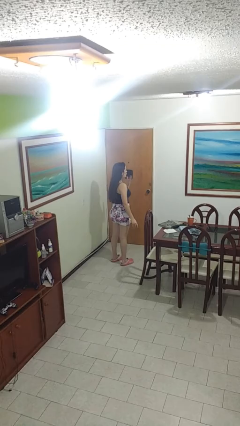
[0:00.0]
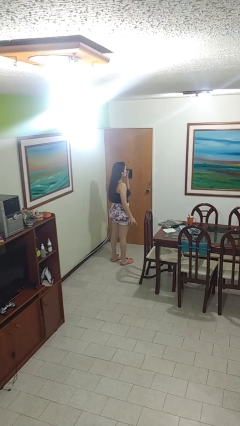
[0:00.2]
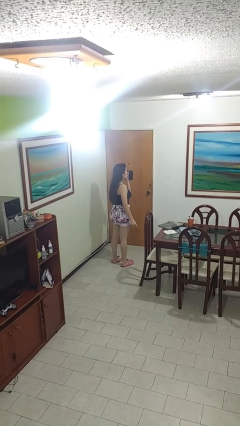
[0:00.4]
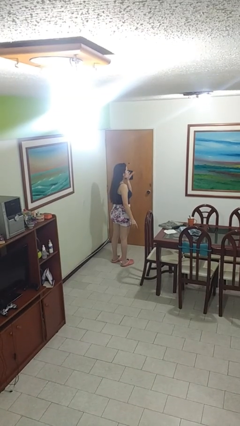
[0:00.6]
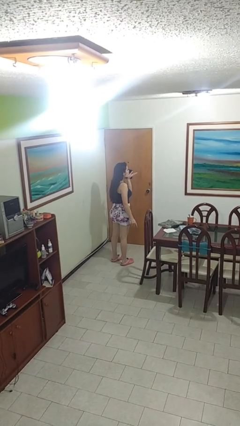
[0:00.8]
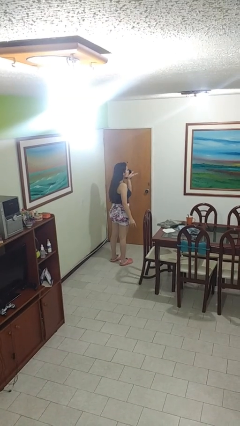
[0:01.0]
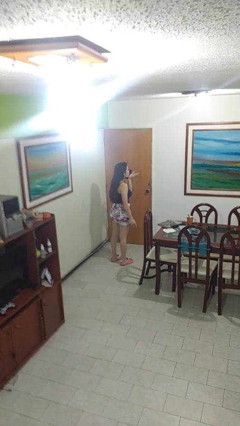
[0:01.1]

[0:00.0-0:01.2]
person gestures blow kiss

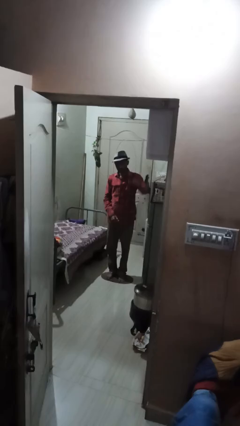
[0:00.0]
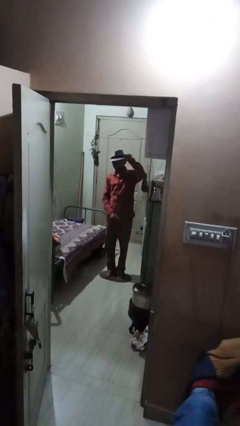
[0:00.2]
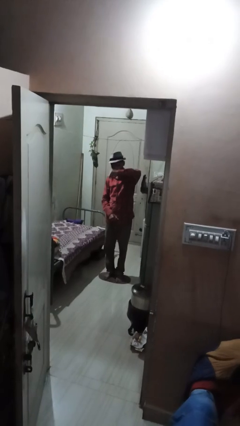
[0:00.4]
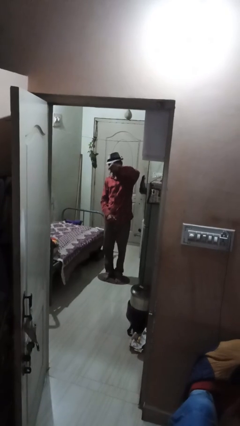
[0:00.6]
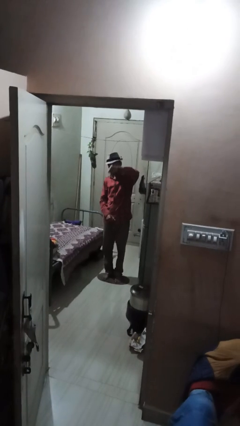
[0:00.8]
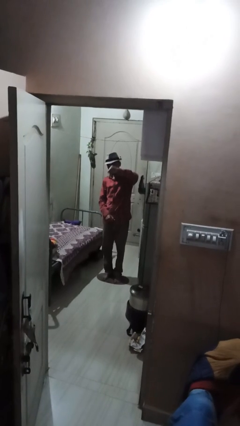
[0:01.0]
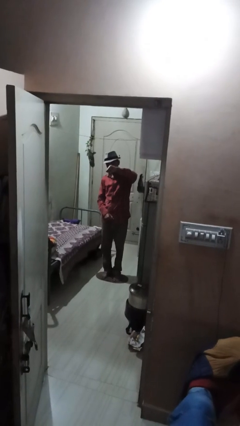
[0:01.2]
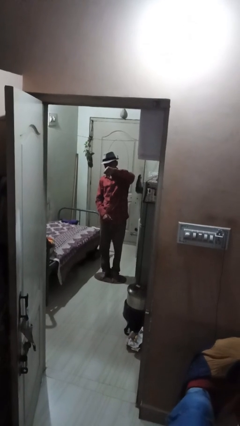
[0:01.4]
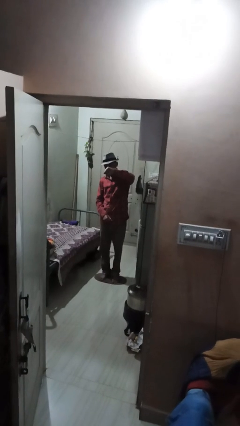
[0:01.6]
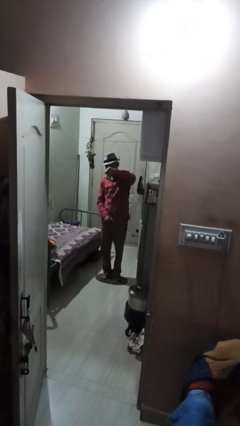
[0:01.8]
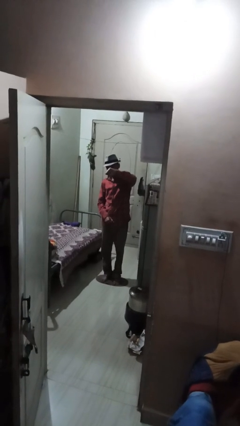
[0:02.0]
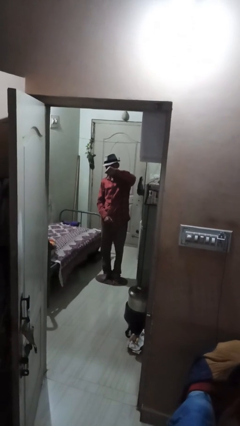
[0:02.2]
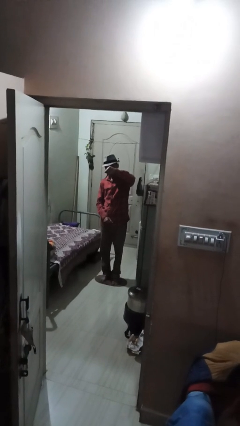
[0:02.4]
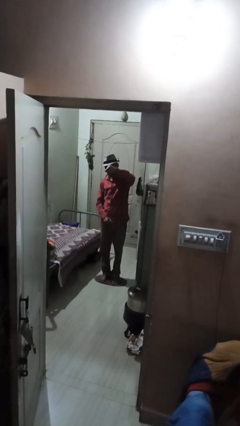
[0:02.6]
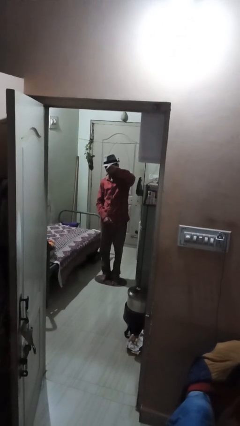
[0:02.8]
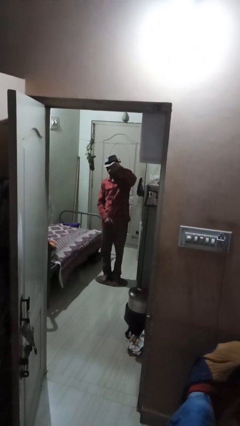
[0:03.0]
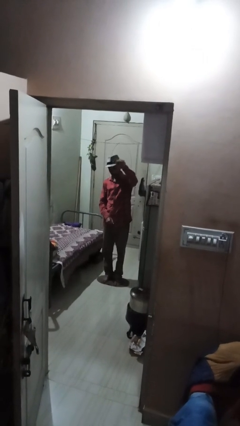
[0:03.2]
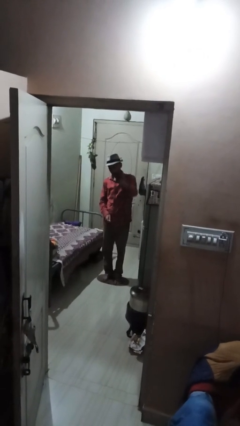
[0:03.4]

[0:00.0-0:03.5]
person gestures thumbs down

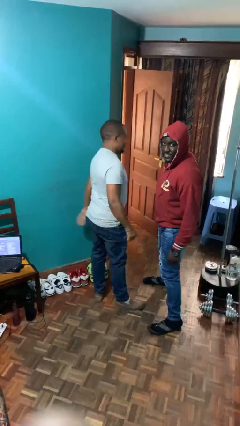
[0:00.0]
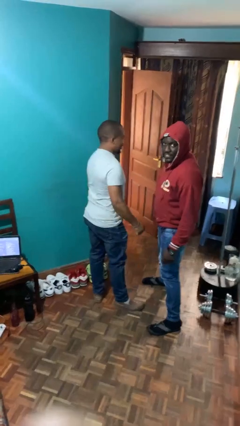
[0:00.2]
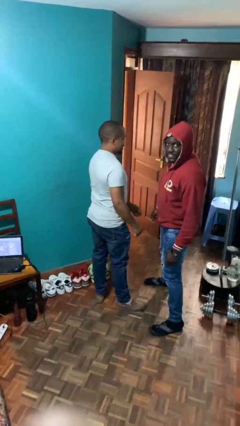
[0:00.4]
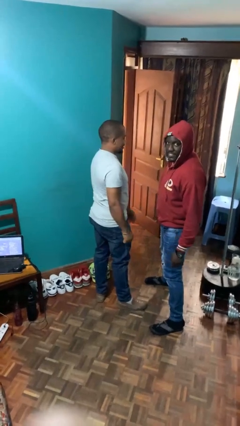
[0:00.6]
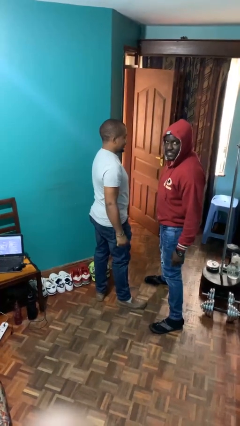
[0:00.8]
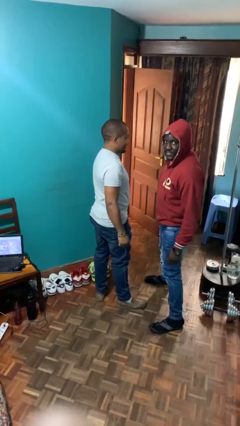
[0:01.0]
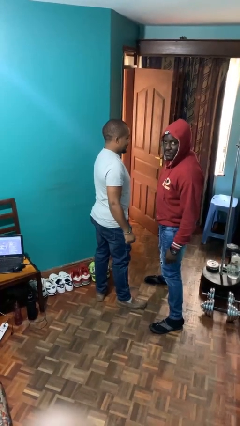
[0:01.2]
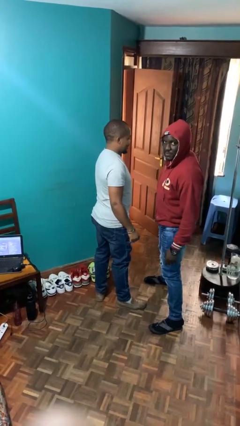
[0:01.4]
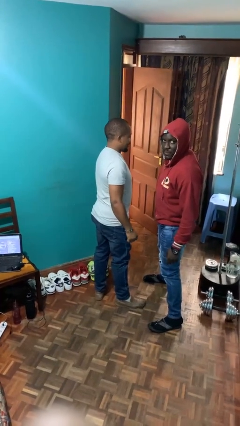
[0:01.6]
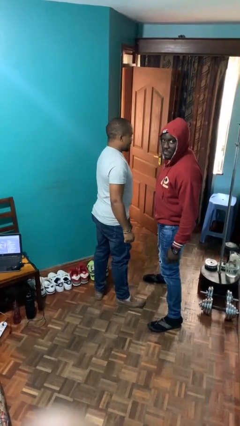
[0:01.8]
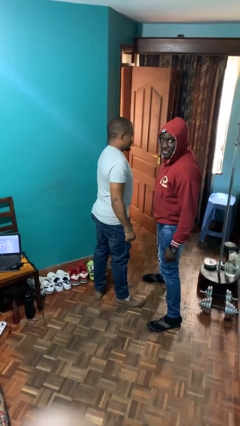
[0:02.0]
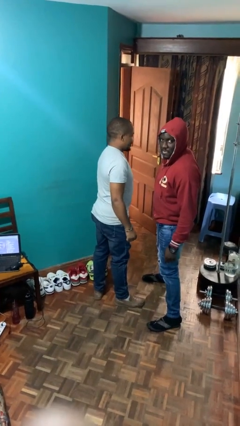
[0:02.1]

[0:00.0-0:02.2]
person puts down person

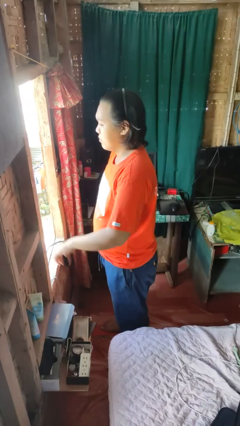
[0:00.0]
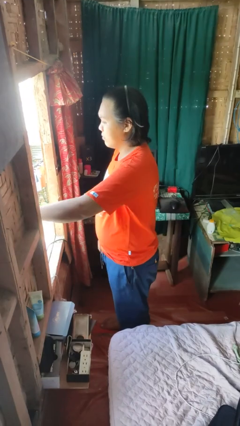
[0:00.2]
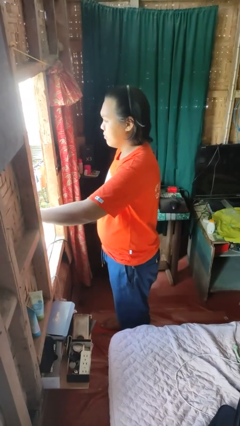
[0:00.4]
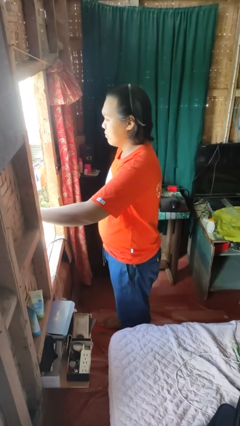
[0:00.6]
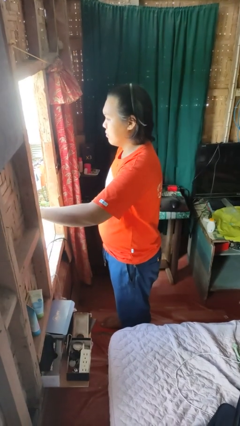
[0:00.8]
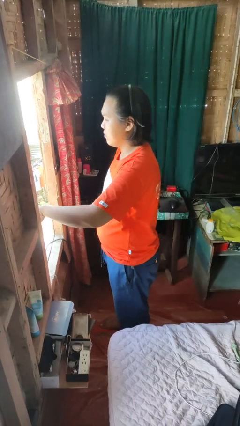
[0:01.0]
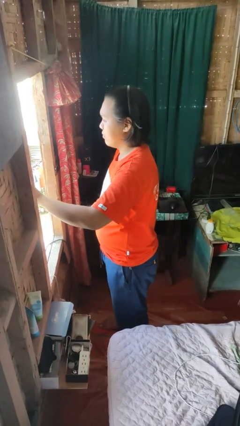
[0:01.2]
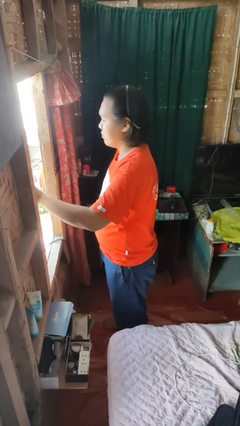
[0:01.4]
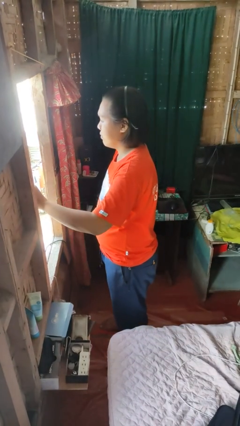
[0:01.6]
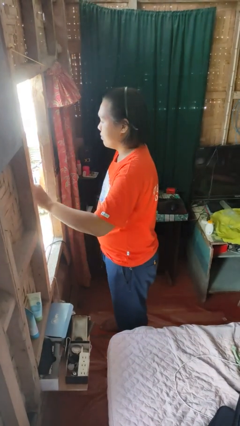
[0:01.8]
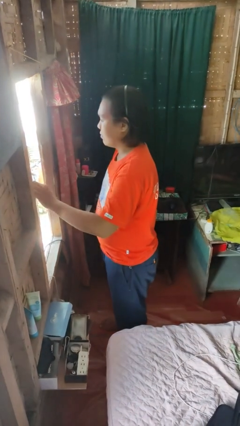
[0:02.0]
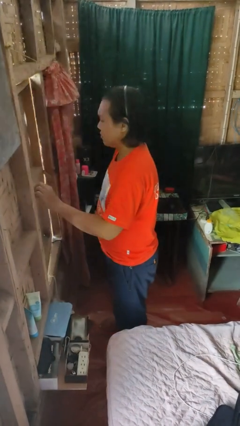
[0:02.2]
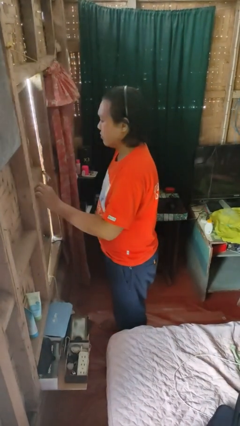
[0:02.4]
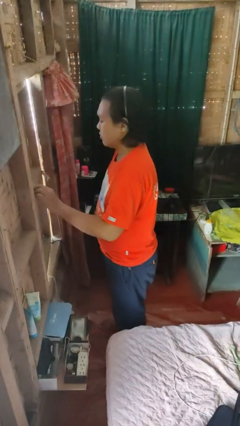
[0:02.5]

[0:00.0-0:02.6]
person closes home window

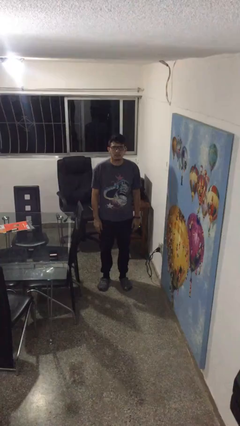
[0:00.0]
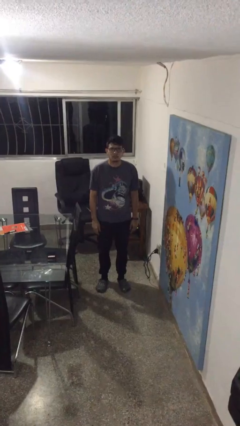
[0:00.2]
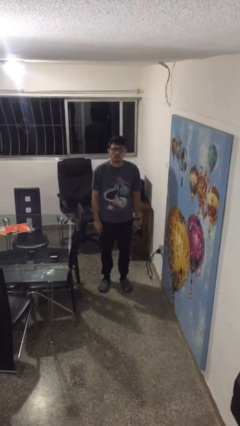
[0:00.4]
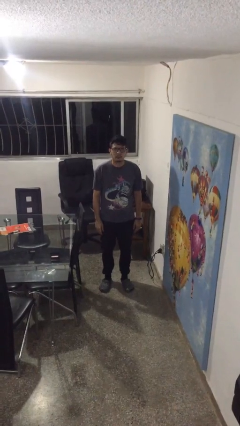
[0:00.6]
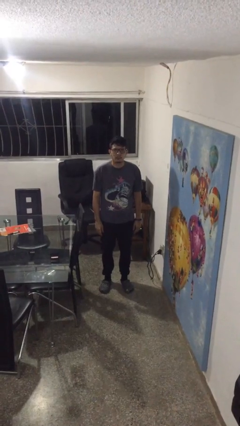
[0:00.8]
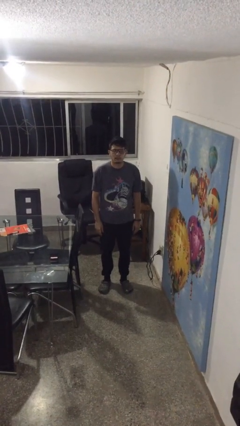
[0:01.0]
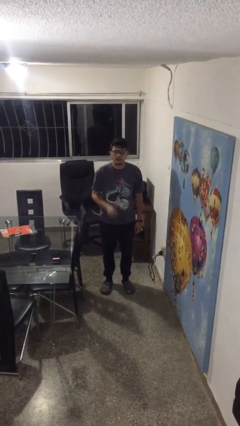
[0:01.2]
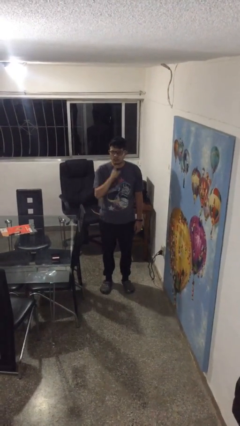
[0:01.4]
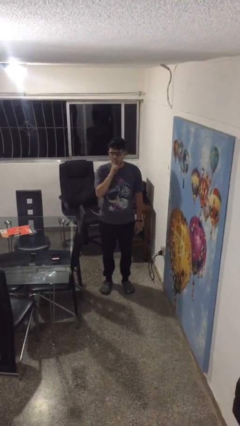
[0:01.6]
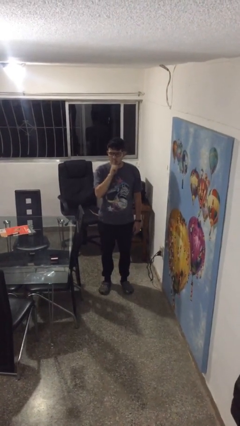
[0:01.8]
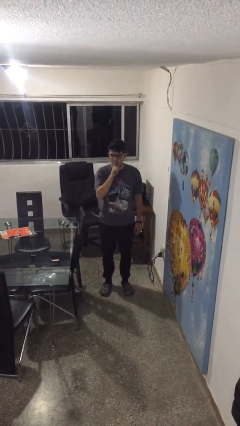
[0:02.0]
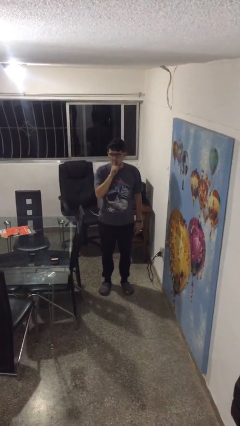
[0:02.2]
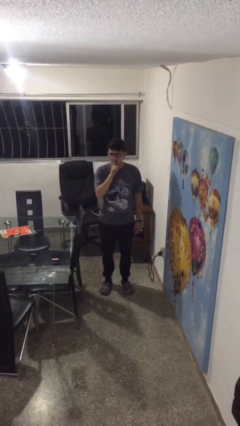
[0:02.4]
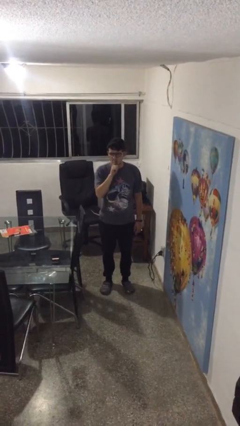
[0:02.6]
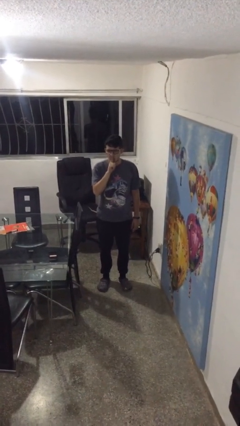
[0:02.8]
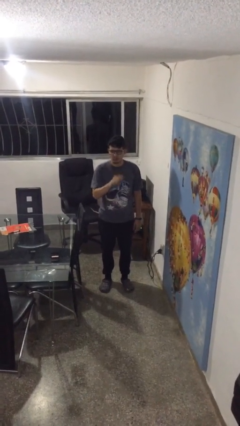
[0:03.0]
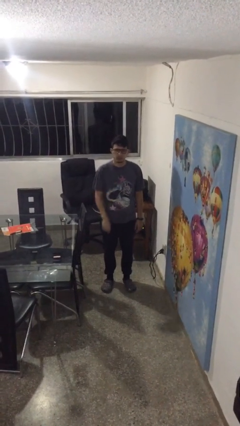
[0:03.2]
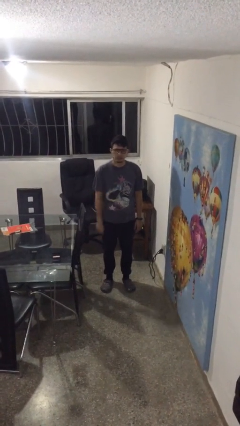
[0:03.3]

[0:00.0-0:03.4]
person gestures be quiet

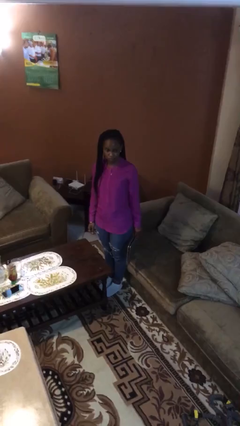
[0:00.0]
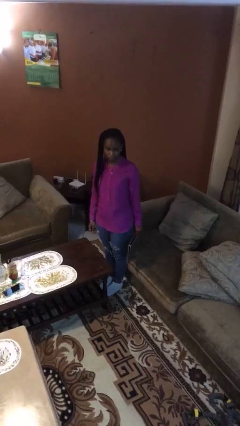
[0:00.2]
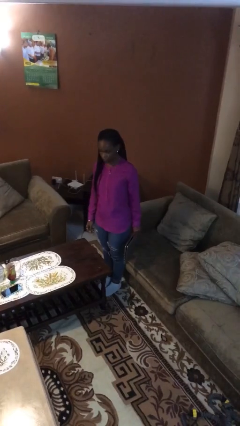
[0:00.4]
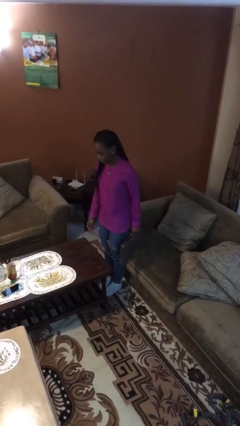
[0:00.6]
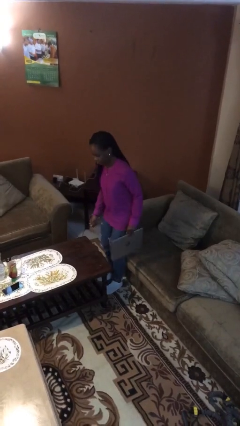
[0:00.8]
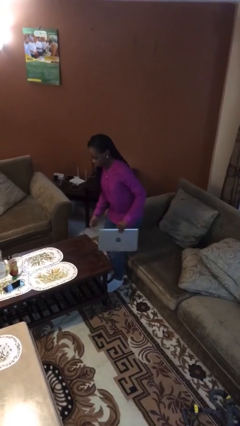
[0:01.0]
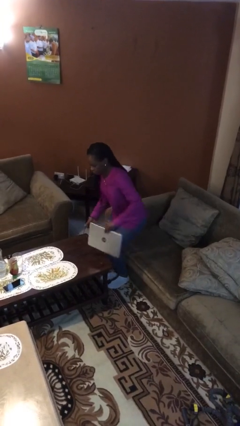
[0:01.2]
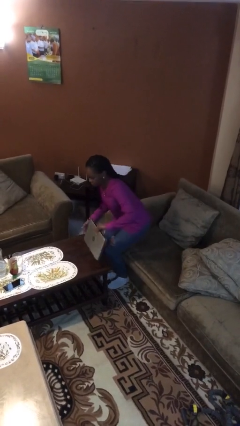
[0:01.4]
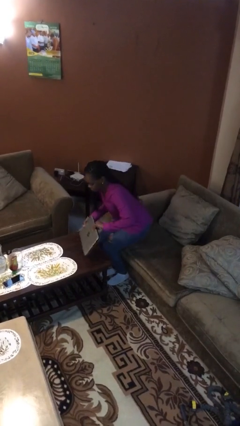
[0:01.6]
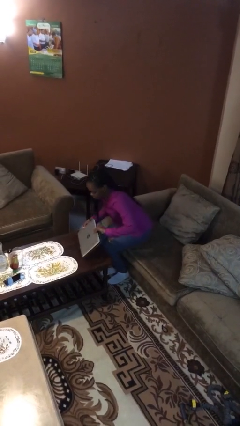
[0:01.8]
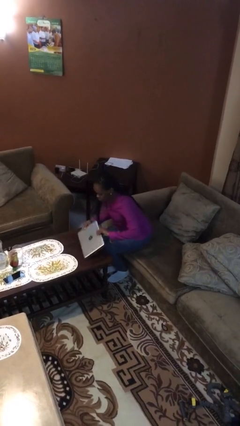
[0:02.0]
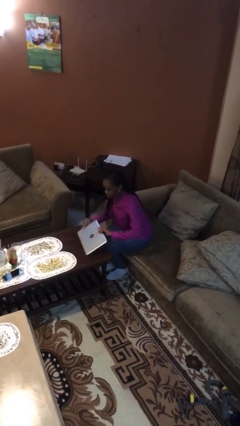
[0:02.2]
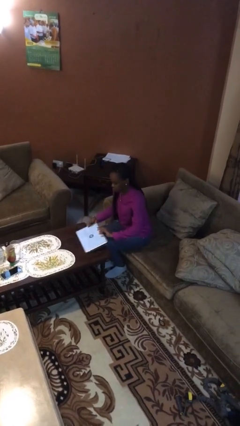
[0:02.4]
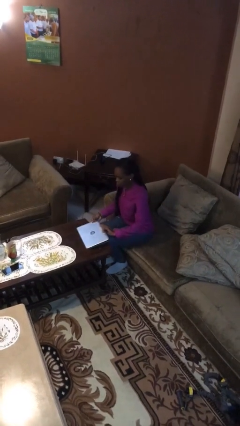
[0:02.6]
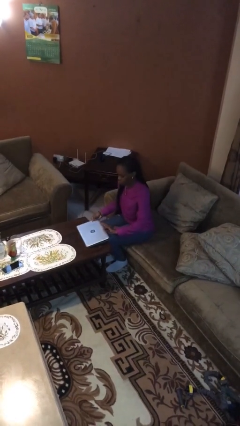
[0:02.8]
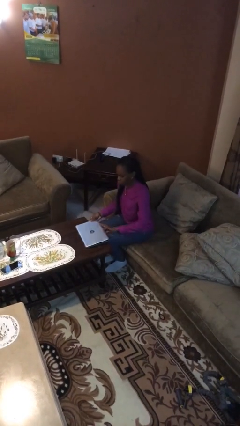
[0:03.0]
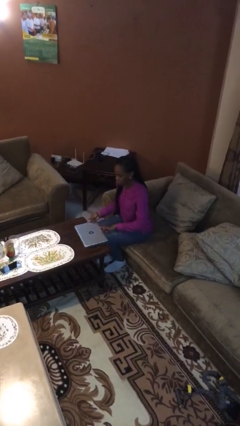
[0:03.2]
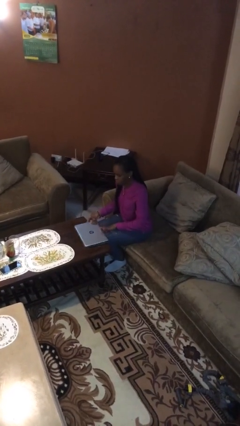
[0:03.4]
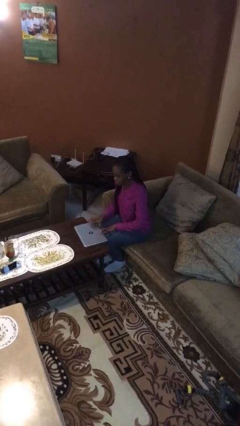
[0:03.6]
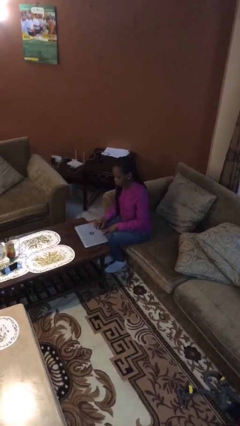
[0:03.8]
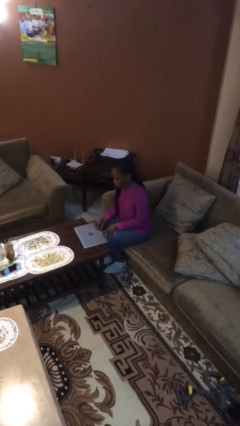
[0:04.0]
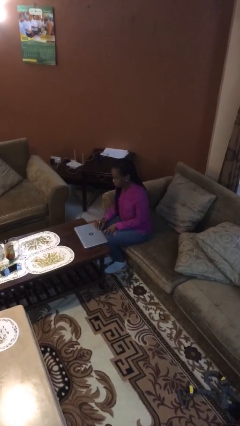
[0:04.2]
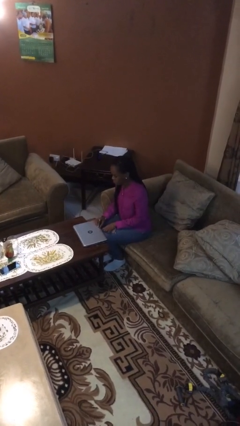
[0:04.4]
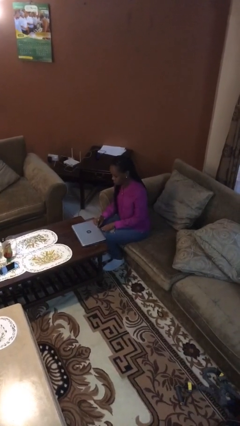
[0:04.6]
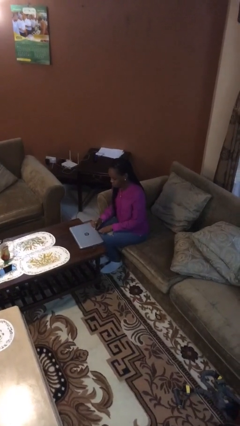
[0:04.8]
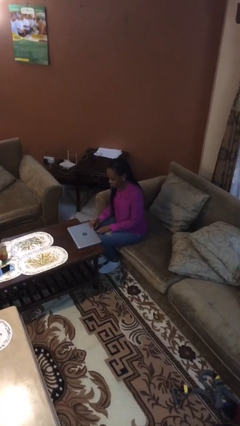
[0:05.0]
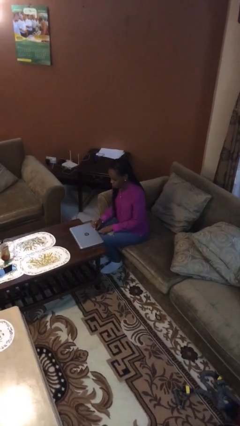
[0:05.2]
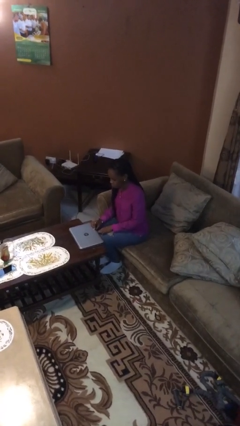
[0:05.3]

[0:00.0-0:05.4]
person sits down
